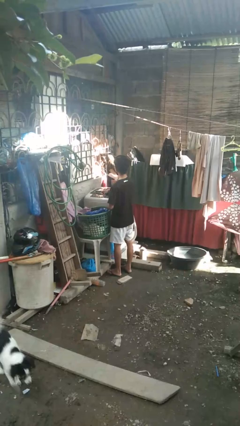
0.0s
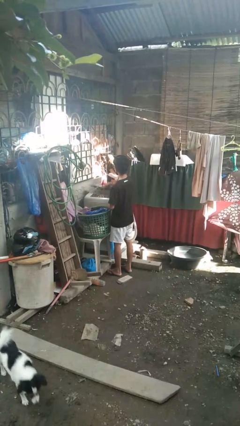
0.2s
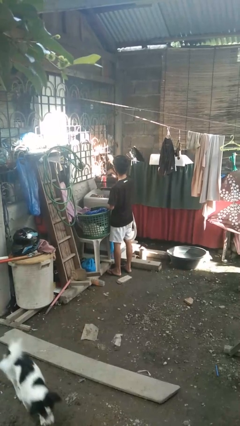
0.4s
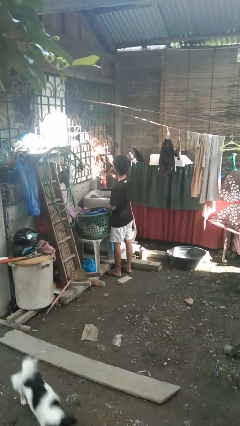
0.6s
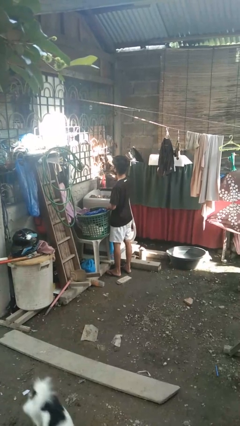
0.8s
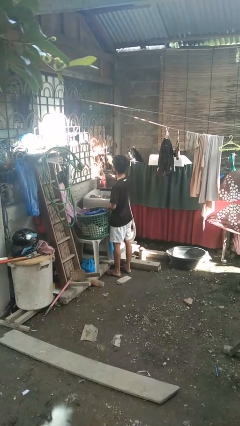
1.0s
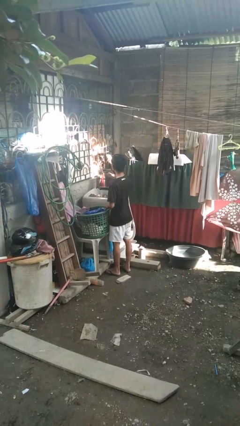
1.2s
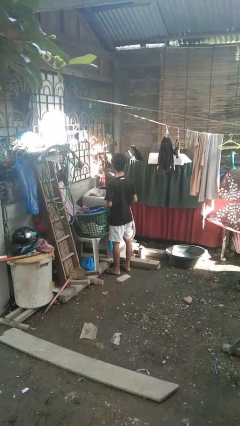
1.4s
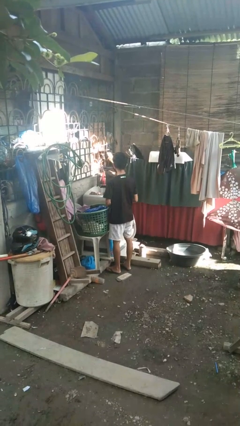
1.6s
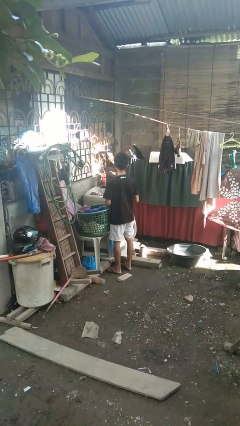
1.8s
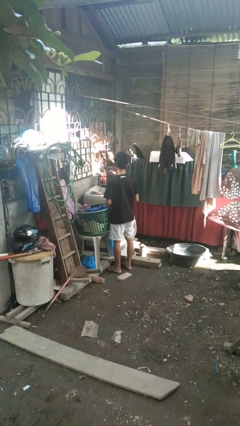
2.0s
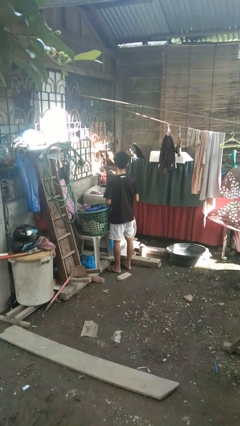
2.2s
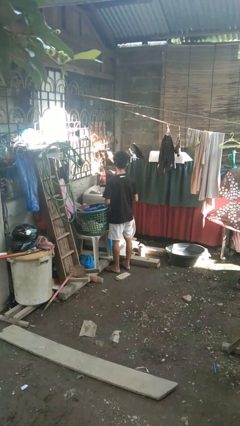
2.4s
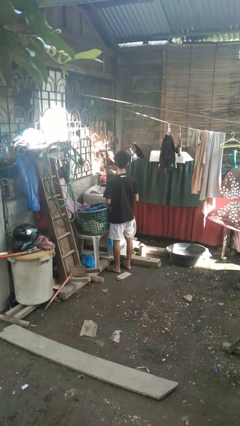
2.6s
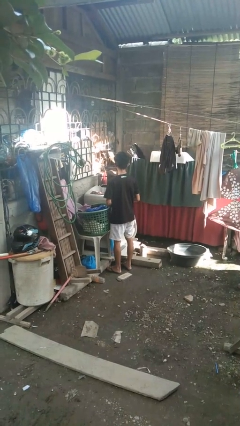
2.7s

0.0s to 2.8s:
person opens clothes washer

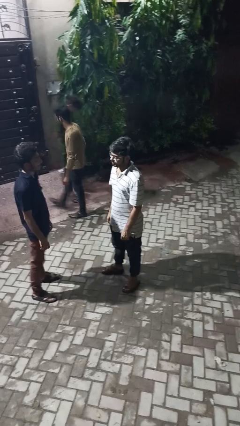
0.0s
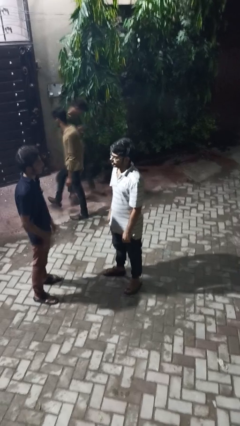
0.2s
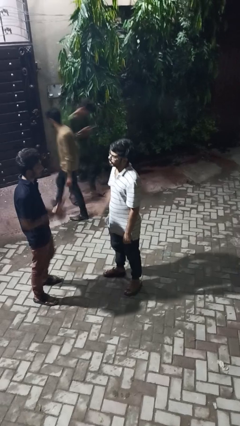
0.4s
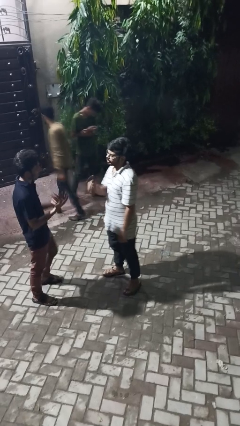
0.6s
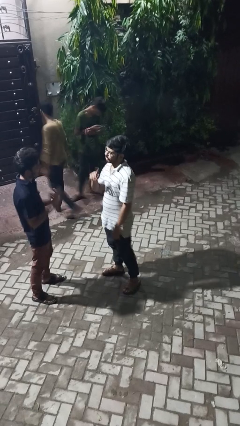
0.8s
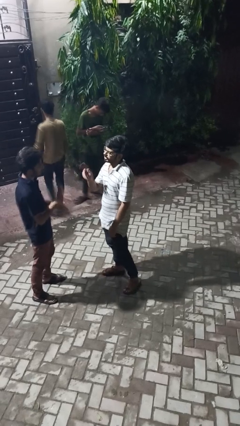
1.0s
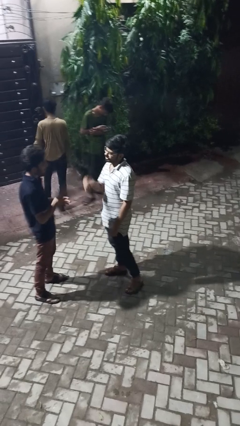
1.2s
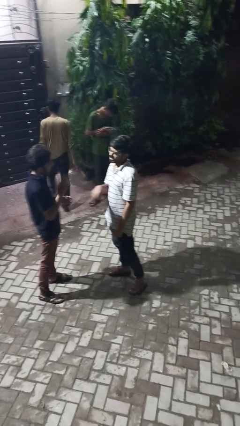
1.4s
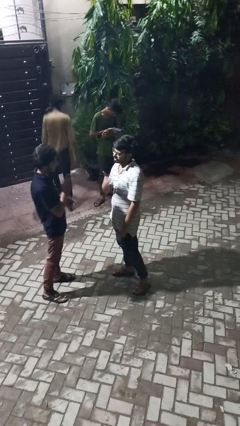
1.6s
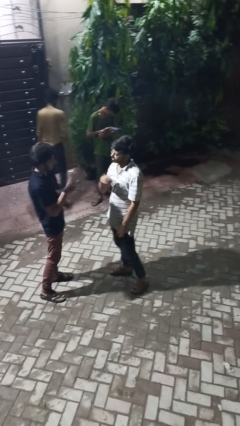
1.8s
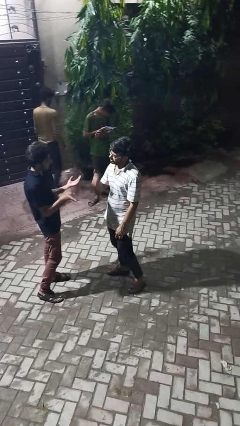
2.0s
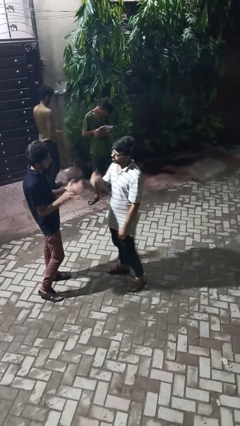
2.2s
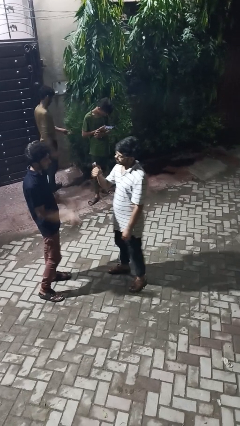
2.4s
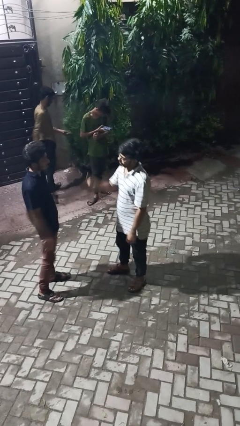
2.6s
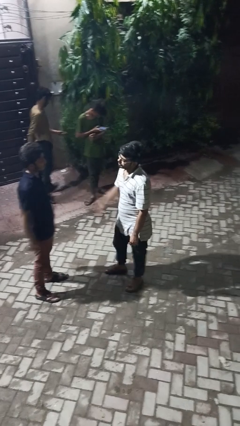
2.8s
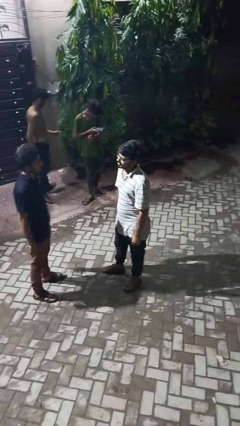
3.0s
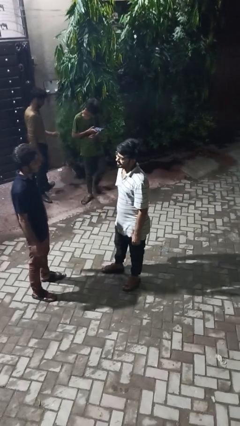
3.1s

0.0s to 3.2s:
person talks to person

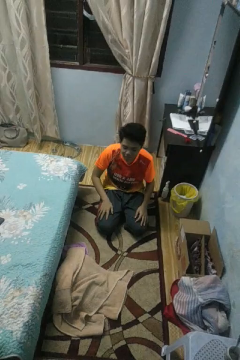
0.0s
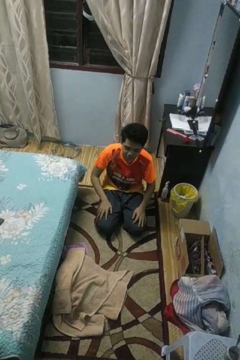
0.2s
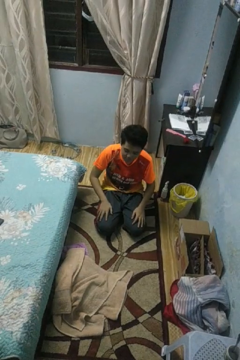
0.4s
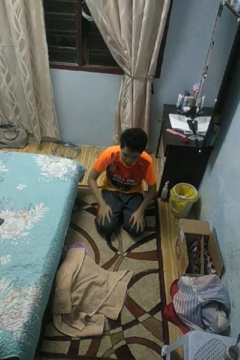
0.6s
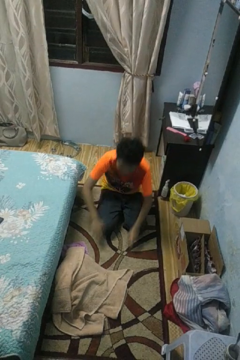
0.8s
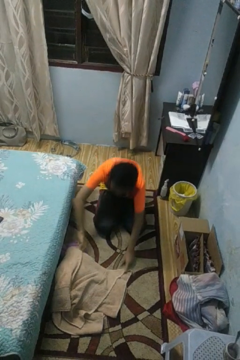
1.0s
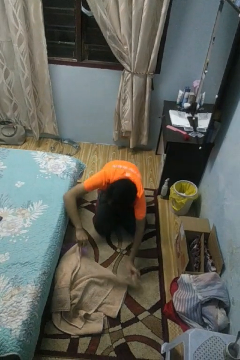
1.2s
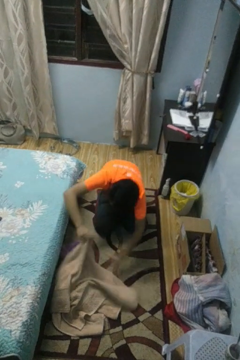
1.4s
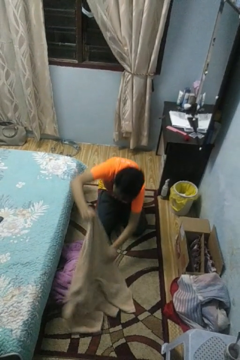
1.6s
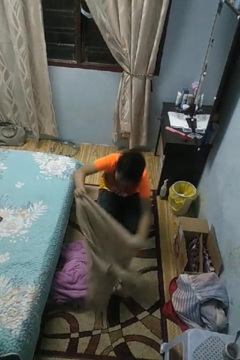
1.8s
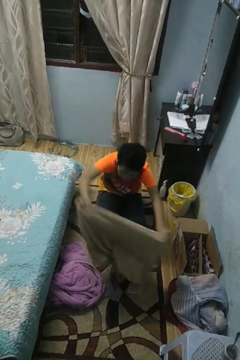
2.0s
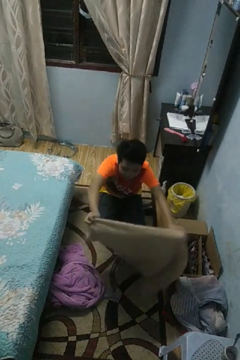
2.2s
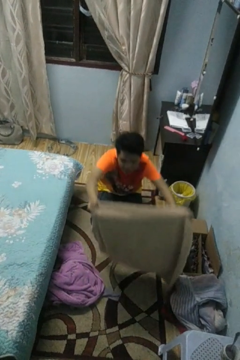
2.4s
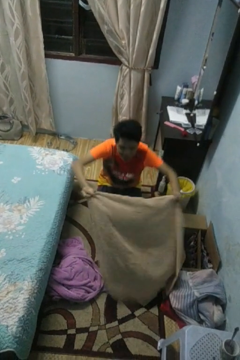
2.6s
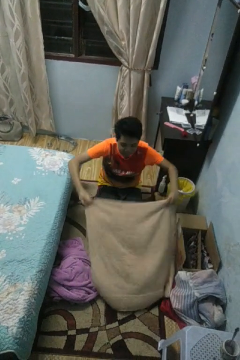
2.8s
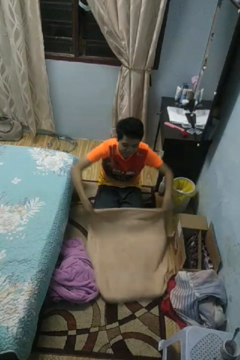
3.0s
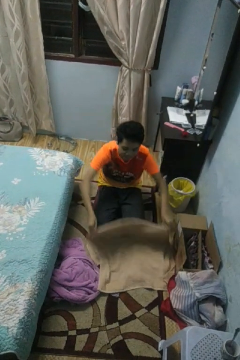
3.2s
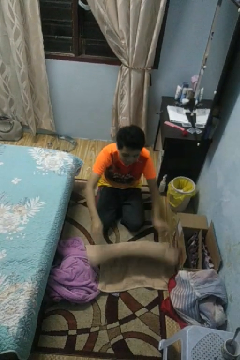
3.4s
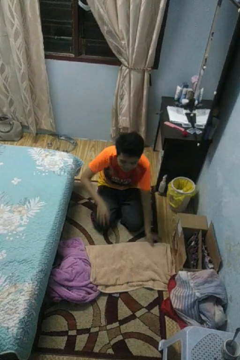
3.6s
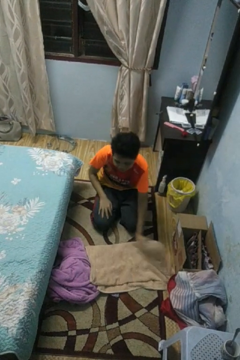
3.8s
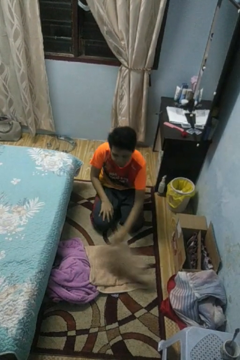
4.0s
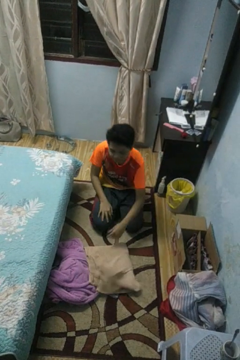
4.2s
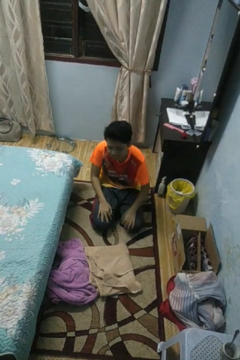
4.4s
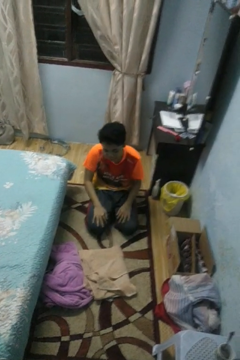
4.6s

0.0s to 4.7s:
person folds towel

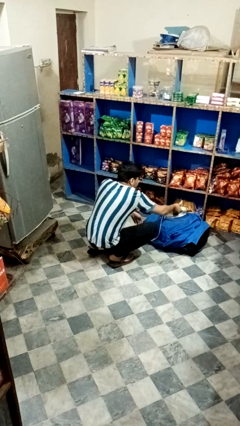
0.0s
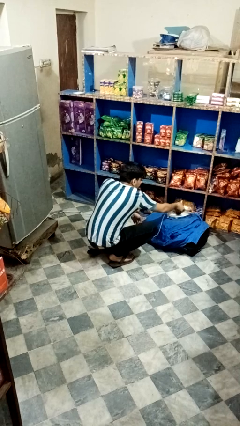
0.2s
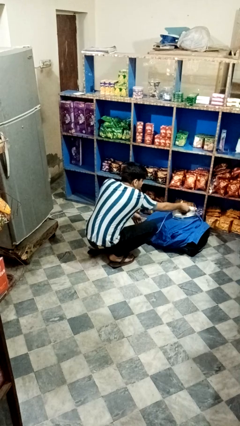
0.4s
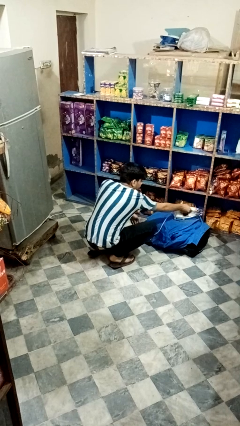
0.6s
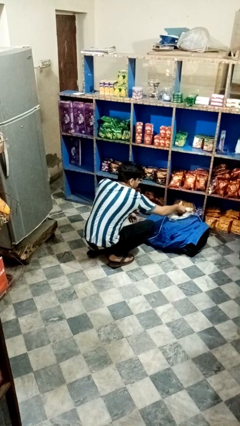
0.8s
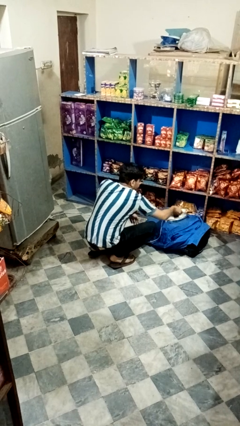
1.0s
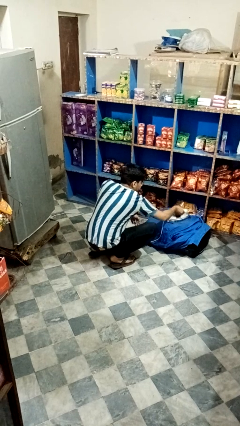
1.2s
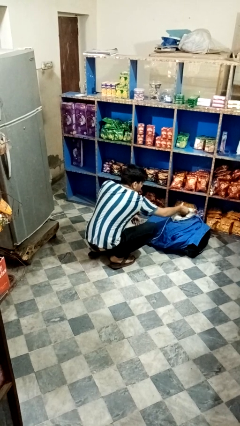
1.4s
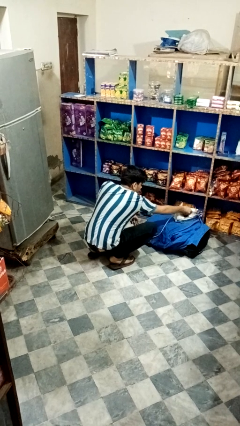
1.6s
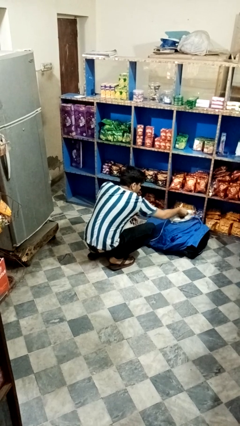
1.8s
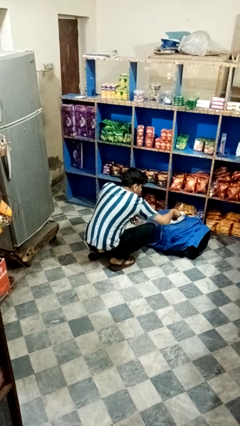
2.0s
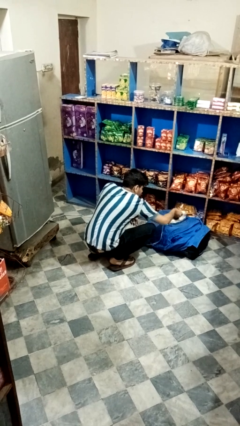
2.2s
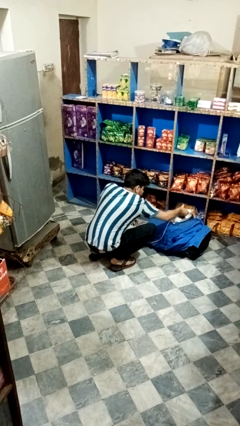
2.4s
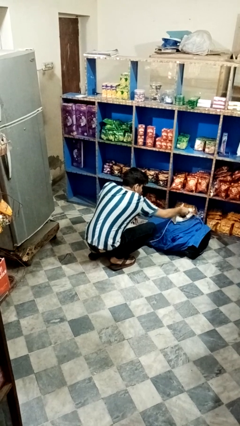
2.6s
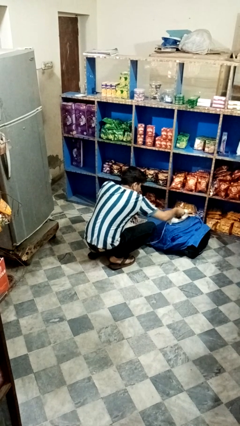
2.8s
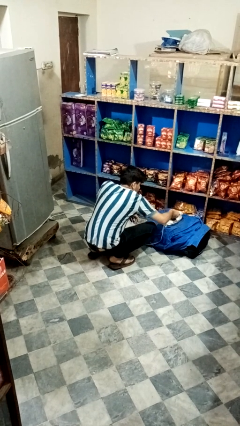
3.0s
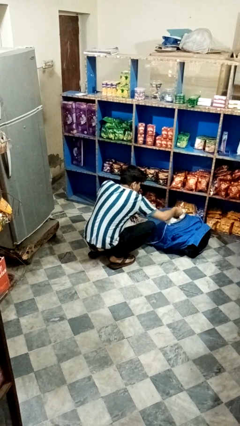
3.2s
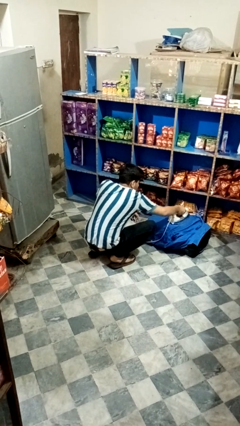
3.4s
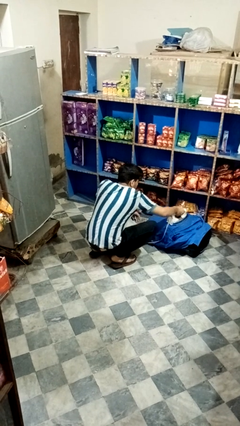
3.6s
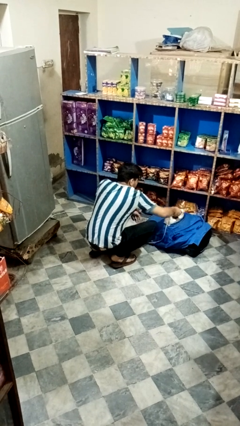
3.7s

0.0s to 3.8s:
person irons clothes

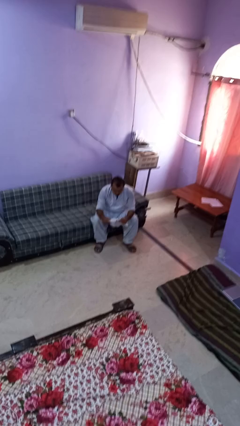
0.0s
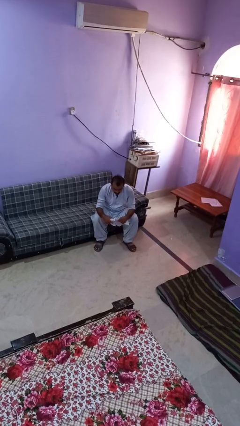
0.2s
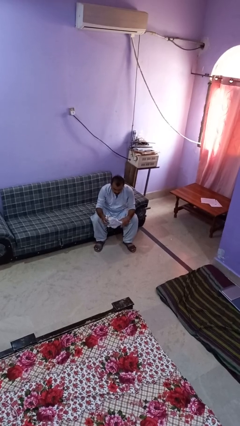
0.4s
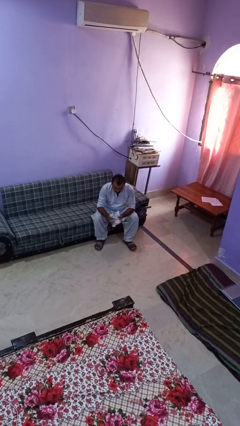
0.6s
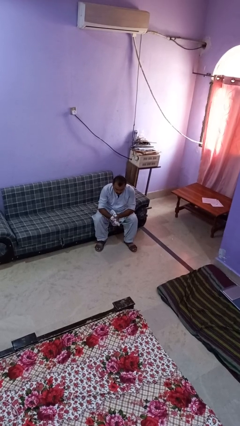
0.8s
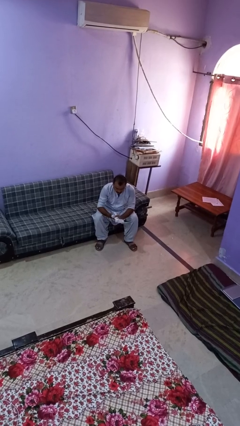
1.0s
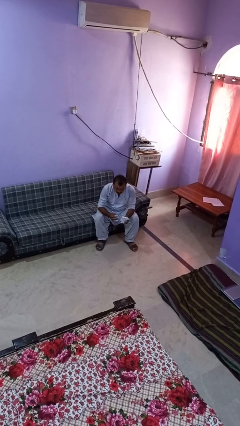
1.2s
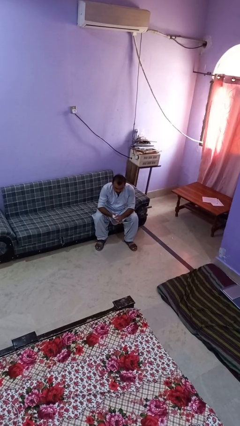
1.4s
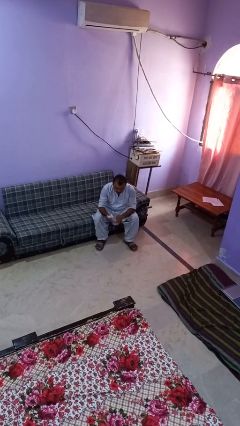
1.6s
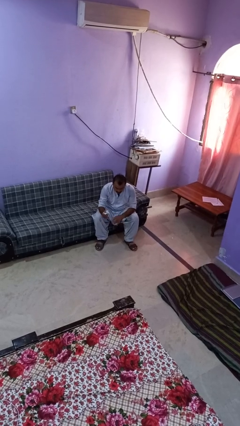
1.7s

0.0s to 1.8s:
person crumples paper

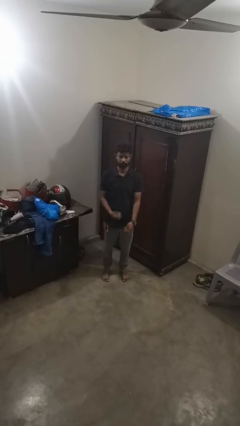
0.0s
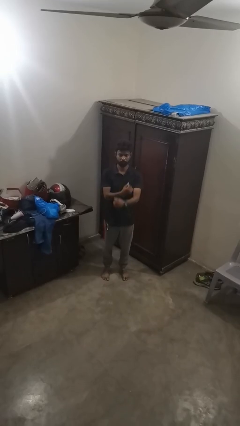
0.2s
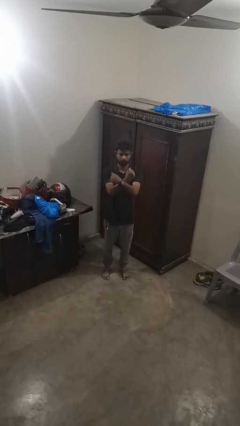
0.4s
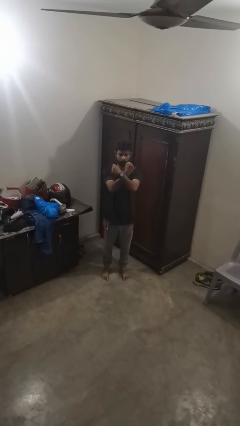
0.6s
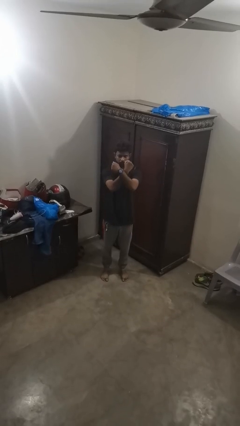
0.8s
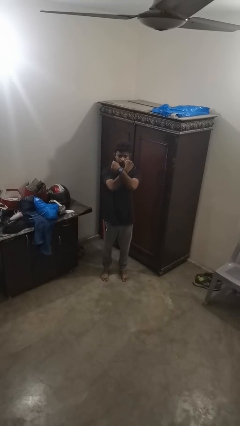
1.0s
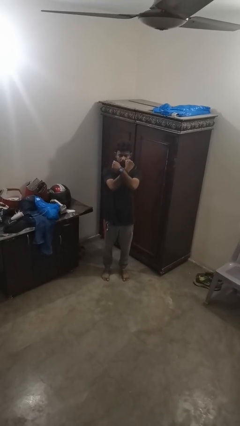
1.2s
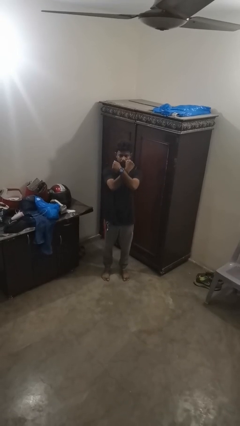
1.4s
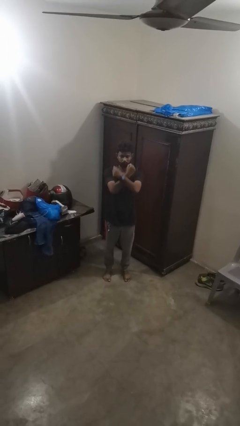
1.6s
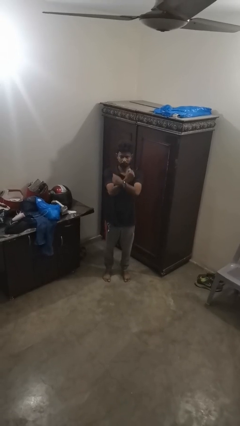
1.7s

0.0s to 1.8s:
person gestures arms x
